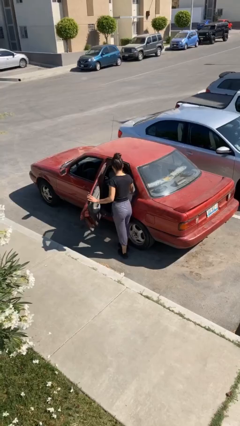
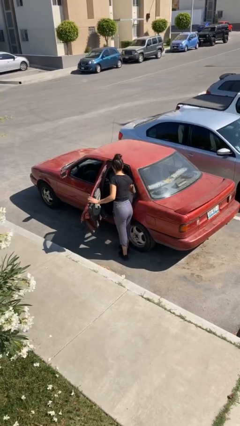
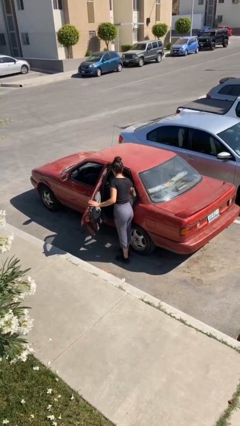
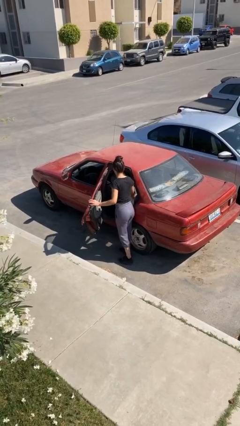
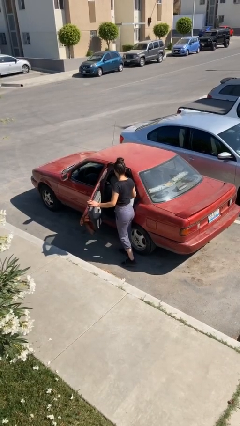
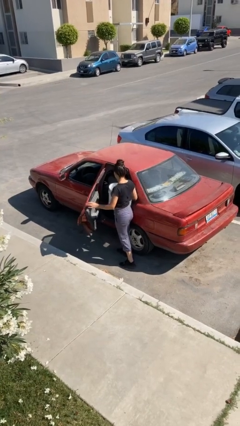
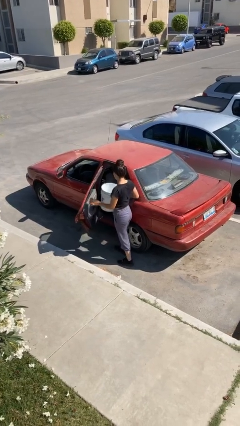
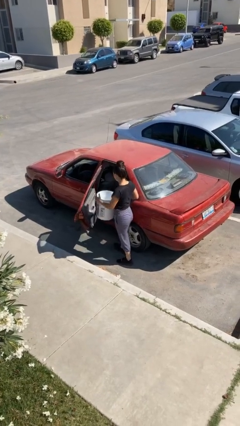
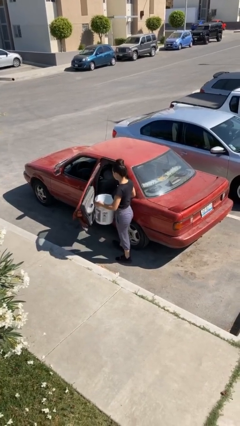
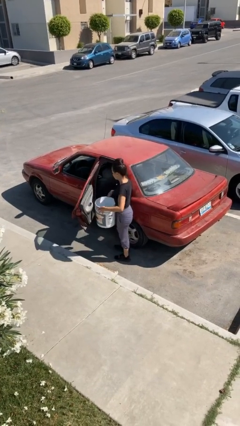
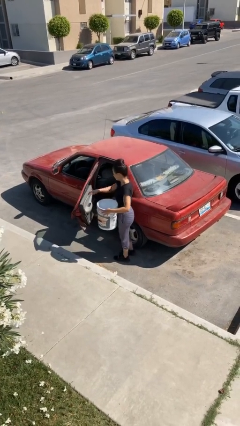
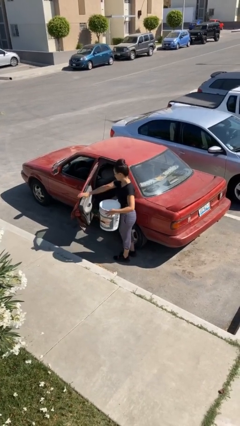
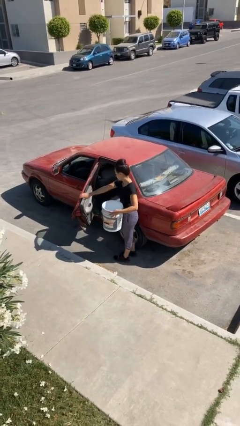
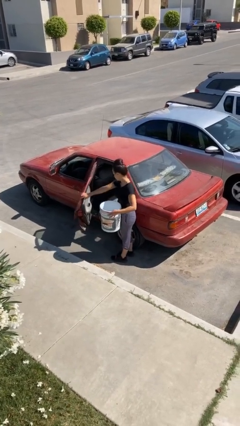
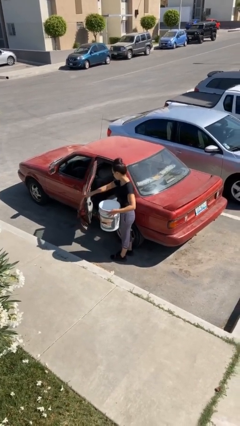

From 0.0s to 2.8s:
person unloads car

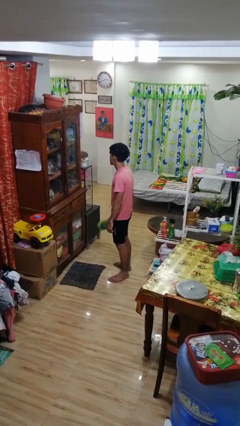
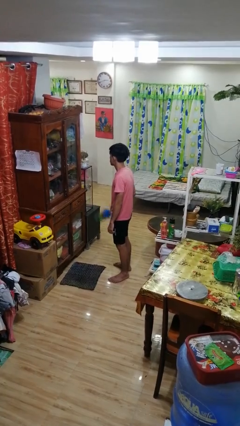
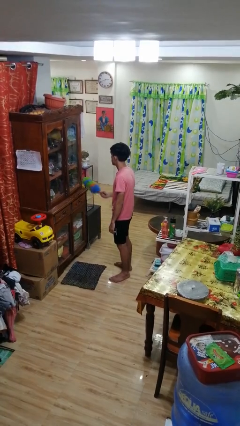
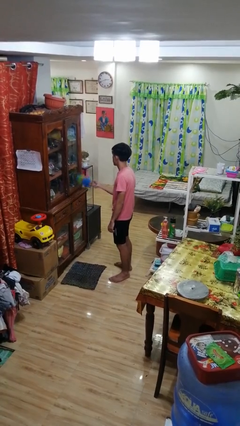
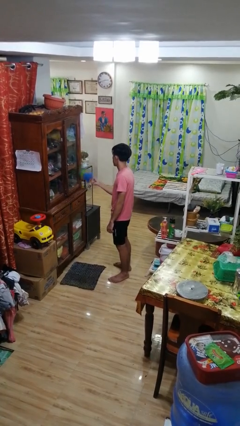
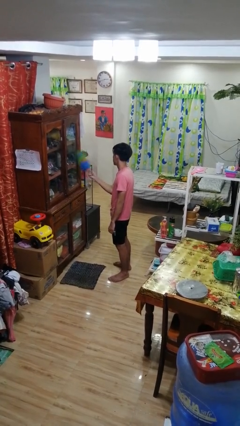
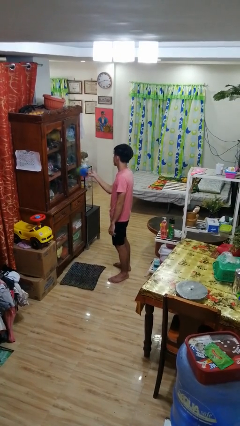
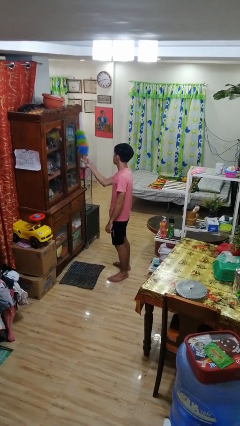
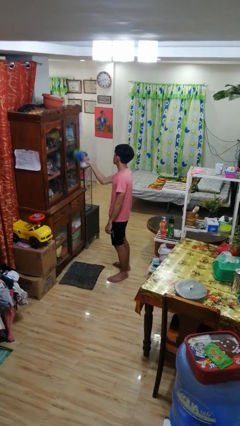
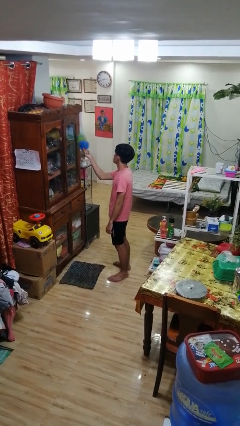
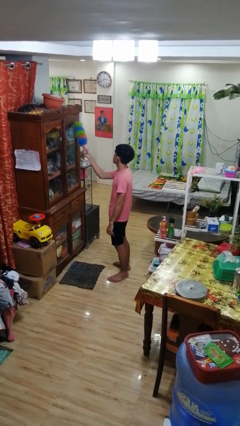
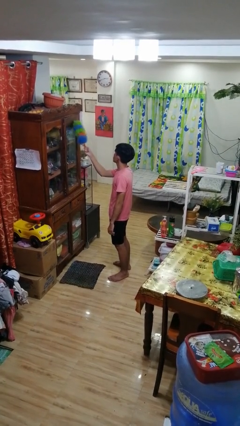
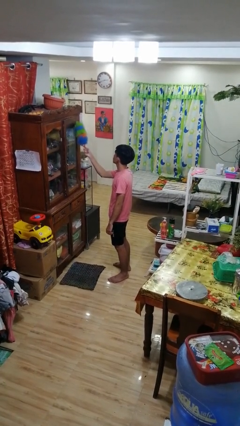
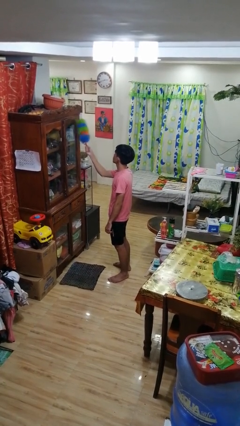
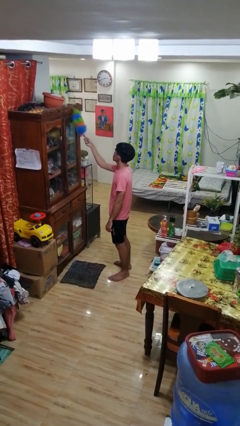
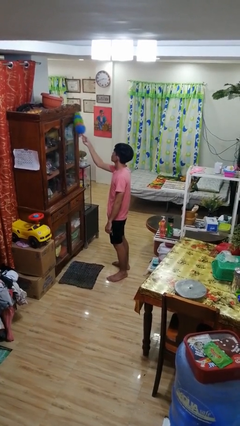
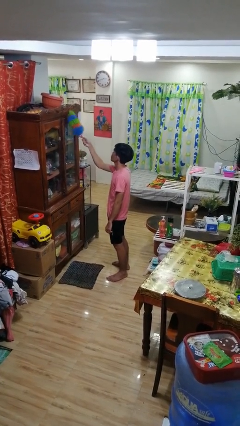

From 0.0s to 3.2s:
person dusts furniture

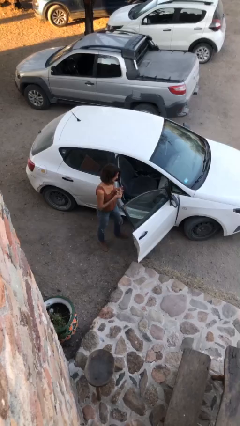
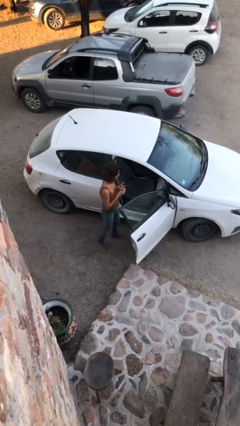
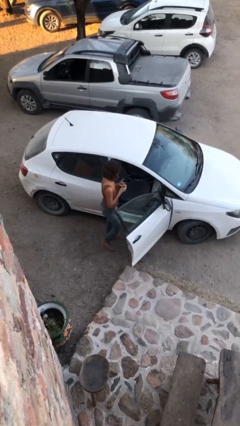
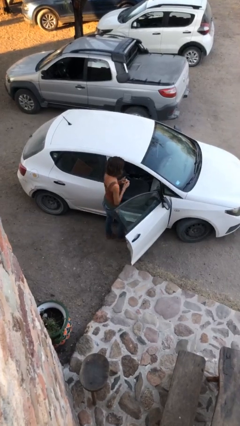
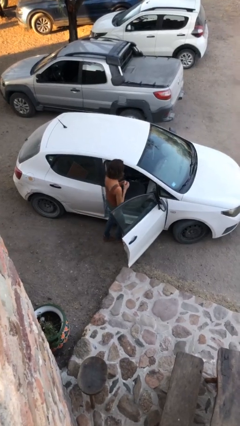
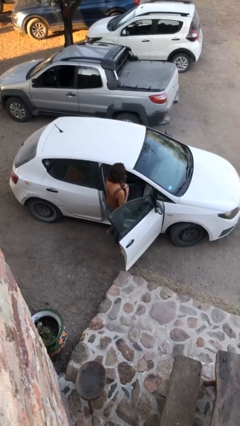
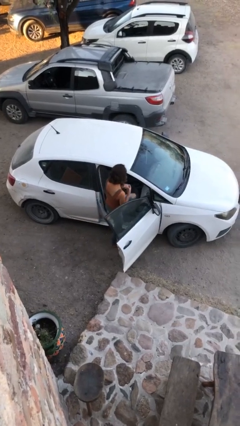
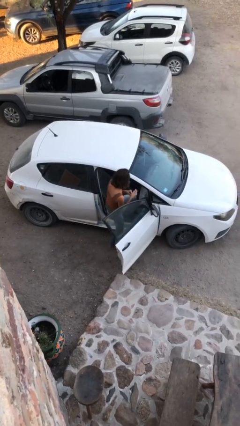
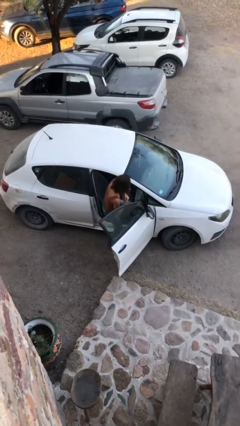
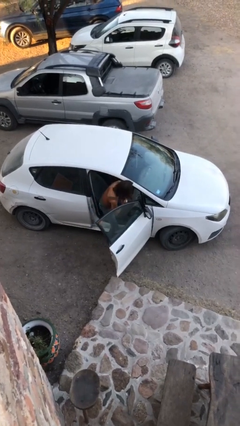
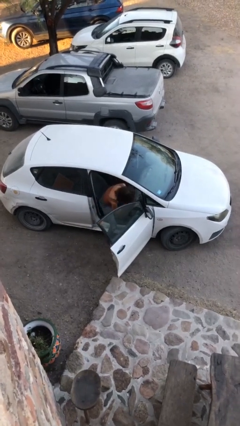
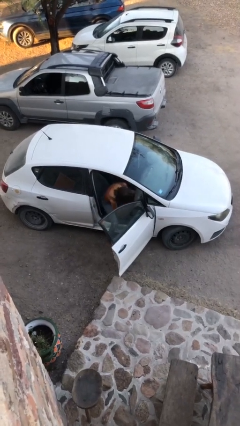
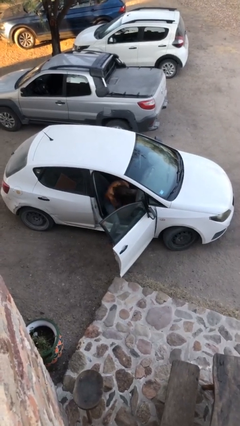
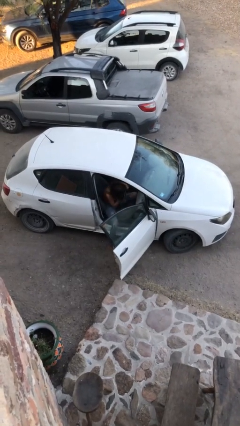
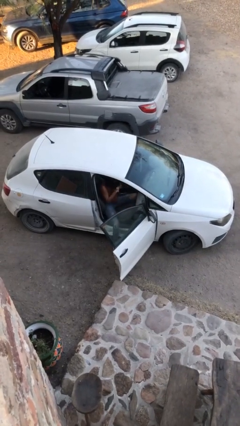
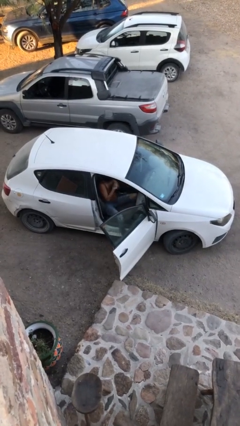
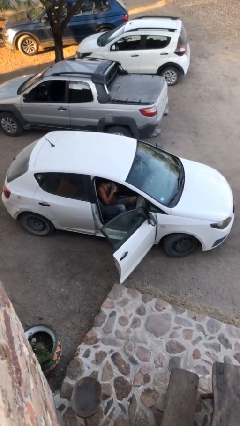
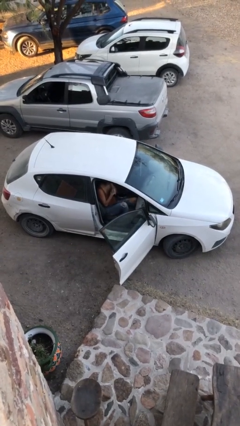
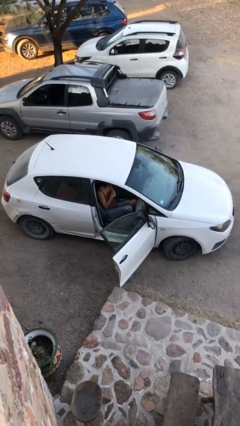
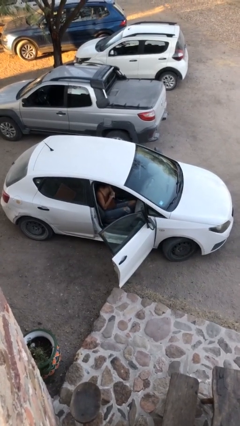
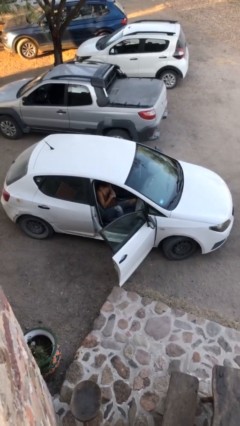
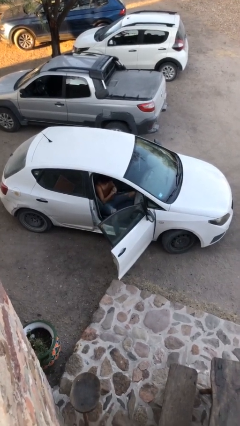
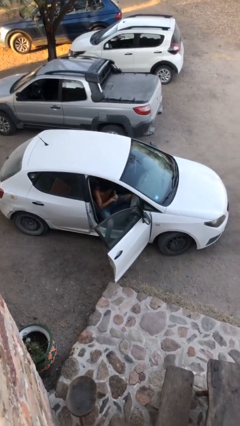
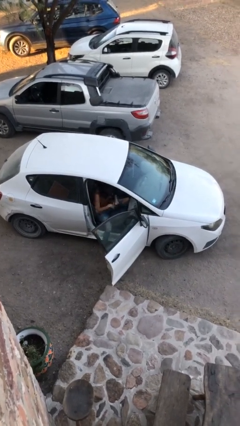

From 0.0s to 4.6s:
person enters car

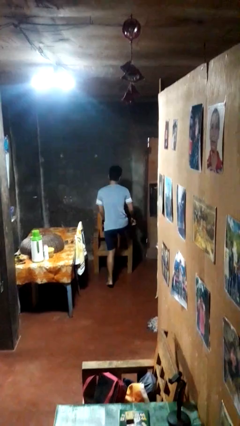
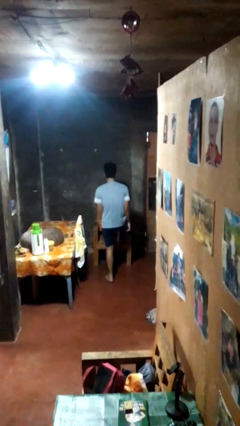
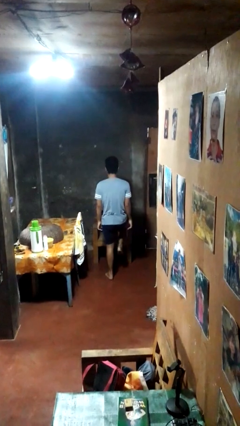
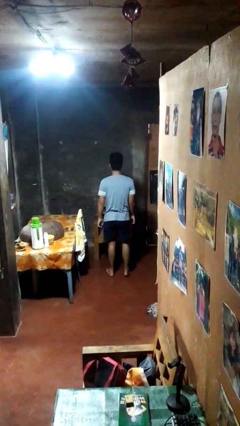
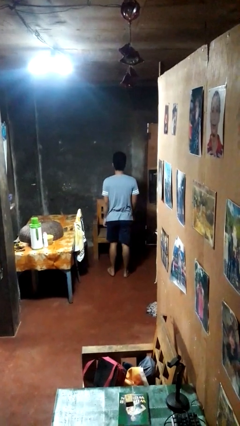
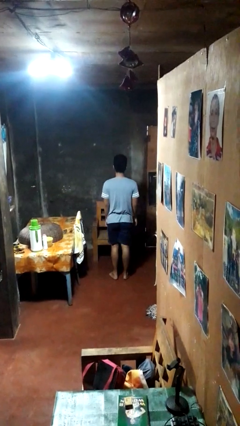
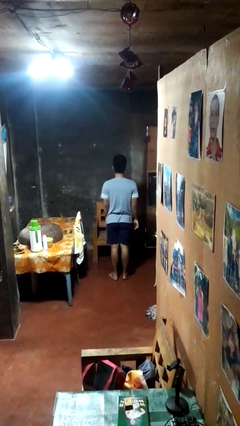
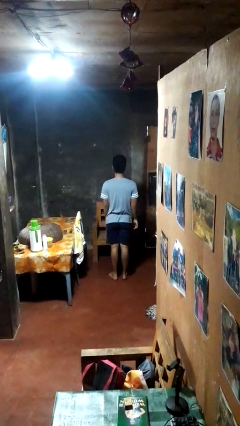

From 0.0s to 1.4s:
person climbs off chair

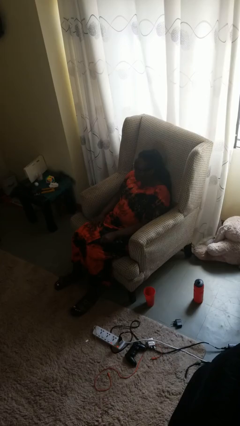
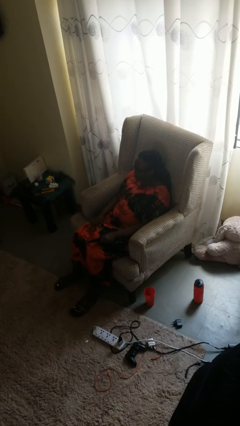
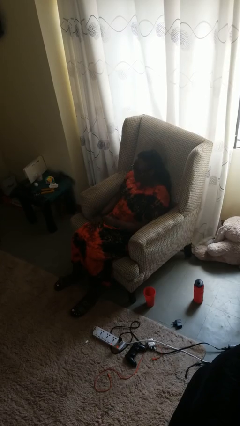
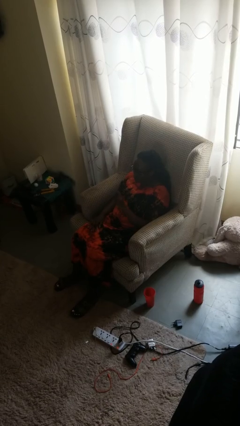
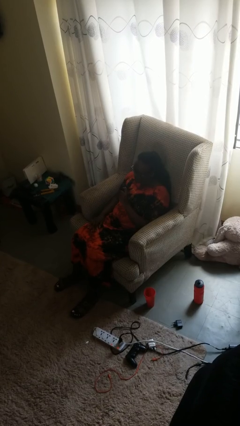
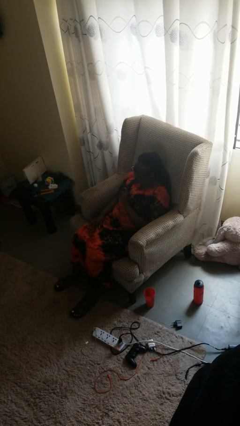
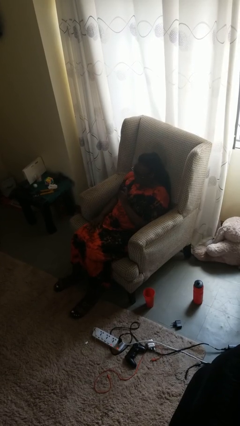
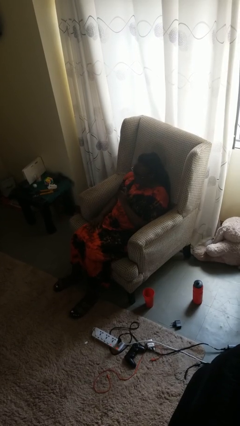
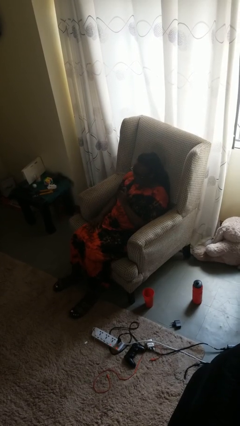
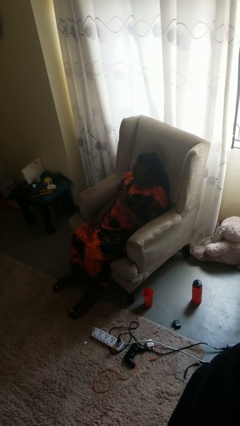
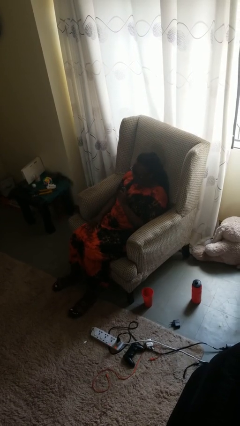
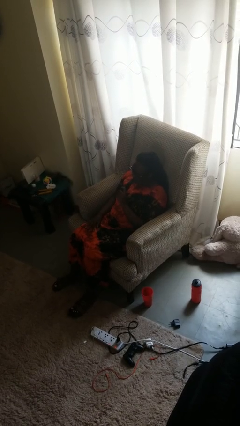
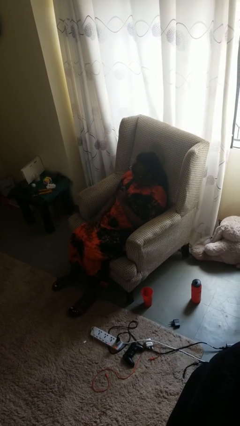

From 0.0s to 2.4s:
person vapes

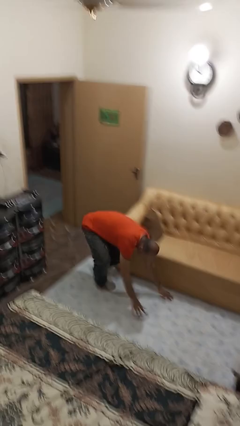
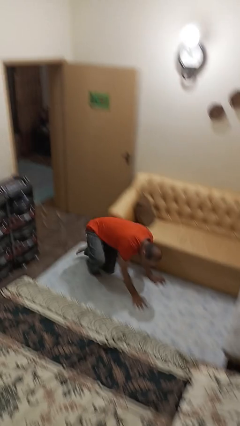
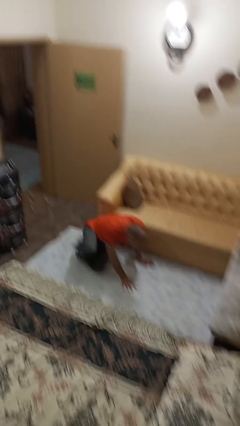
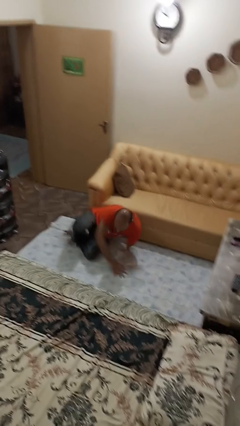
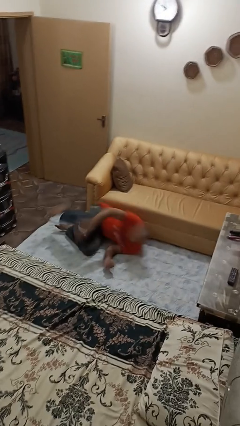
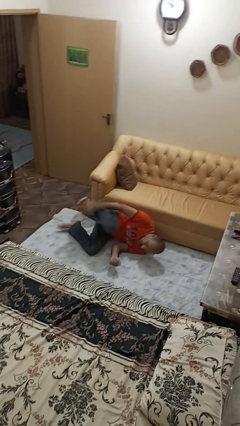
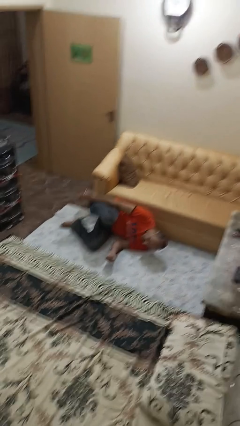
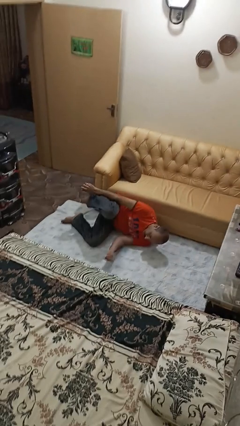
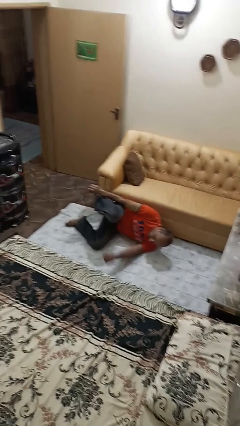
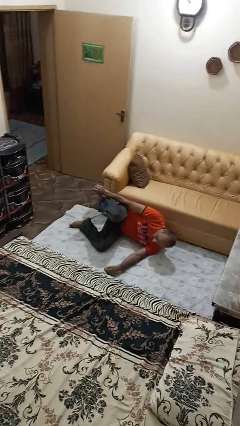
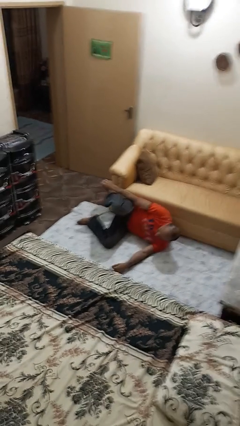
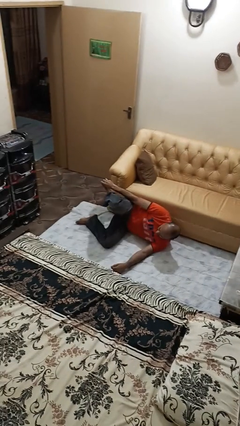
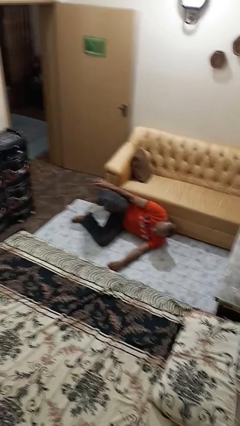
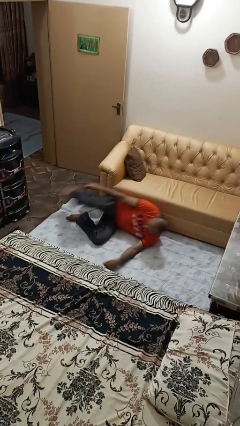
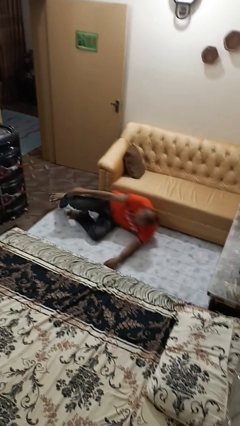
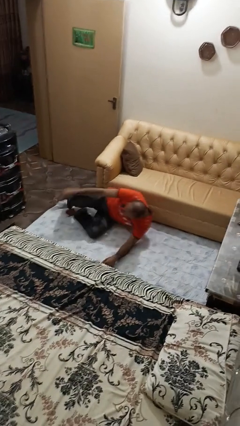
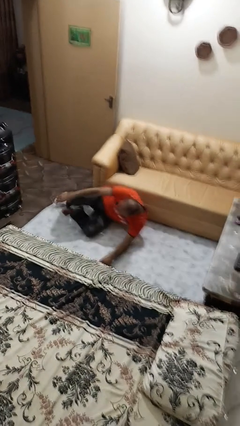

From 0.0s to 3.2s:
person lies down on floor
